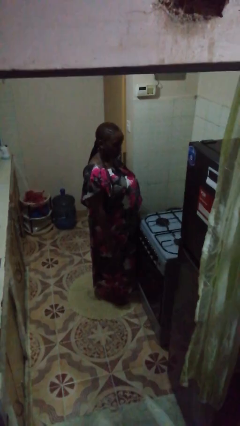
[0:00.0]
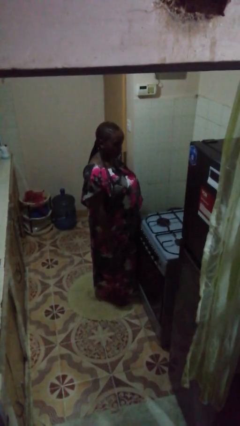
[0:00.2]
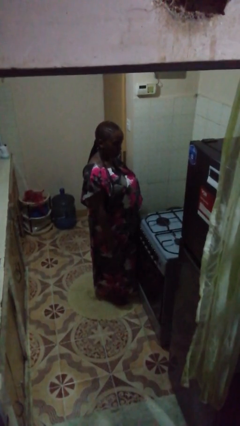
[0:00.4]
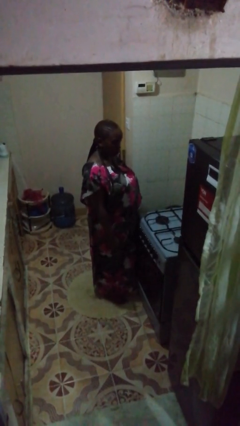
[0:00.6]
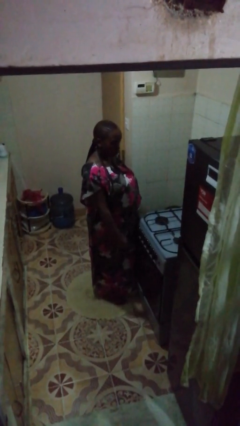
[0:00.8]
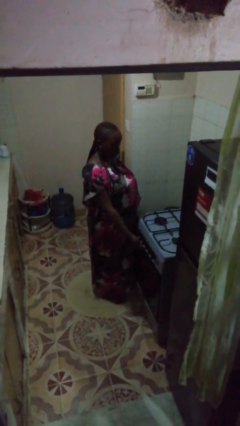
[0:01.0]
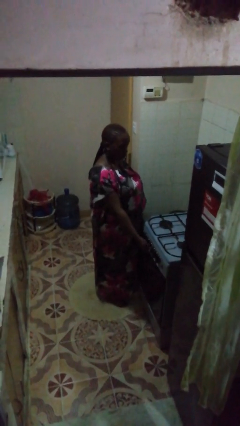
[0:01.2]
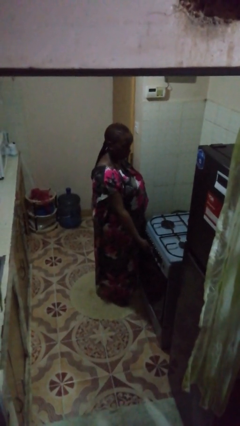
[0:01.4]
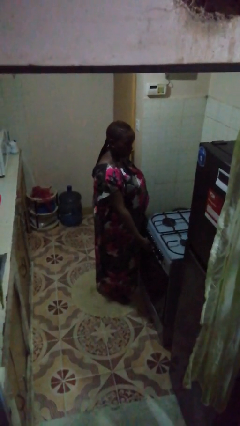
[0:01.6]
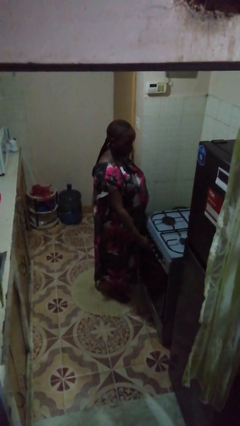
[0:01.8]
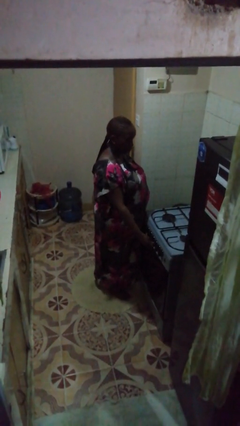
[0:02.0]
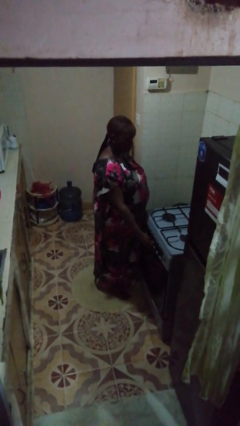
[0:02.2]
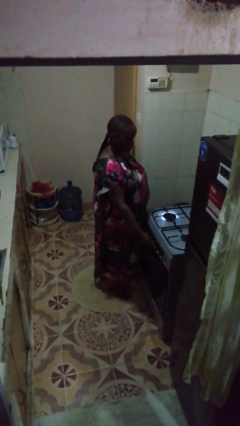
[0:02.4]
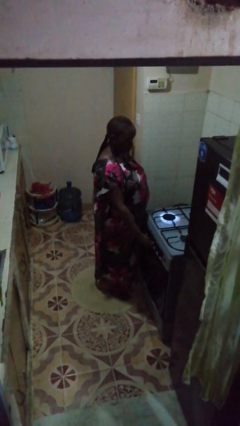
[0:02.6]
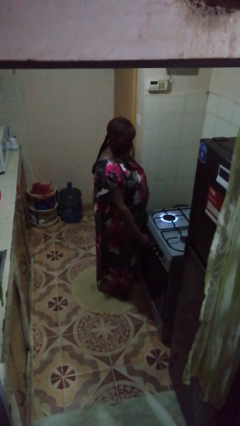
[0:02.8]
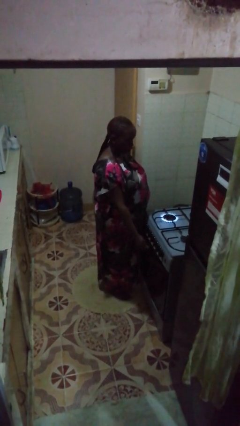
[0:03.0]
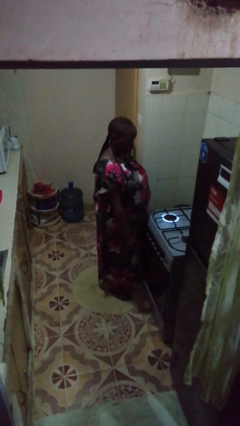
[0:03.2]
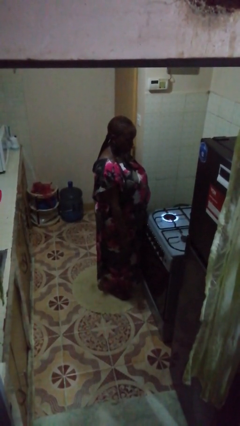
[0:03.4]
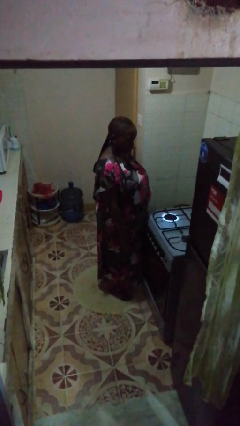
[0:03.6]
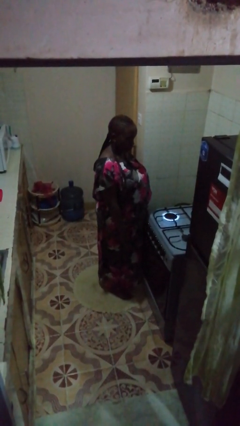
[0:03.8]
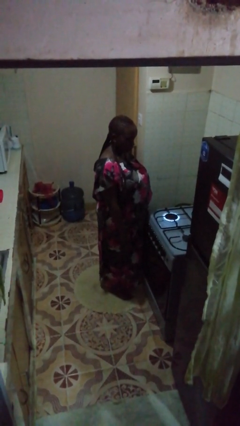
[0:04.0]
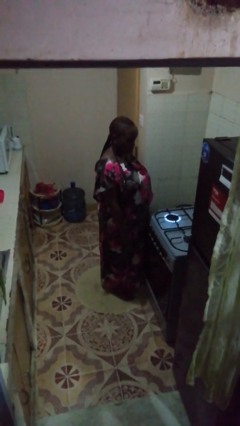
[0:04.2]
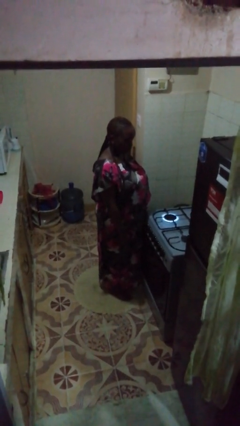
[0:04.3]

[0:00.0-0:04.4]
person turns on stovetop

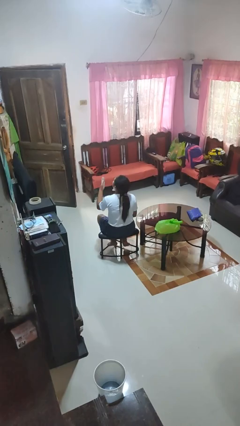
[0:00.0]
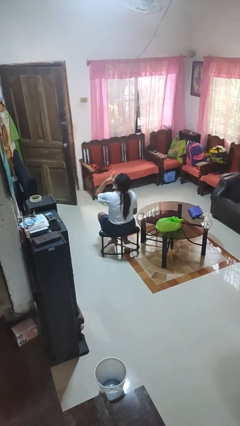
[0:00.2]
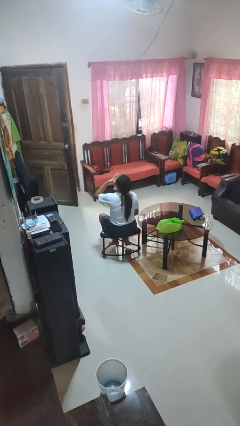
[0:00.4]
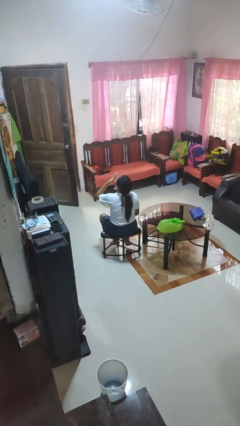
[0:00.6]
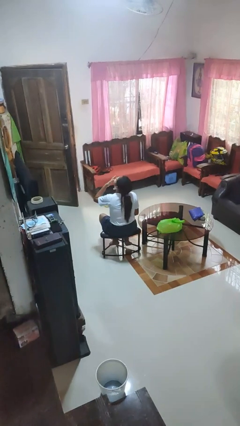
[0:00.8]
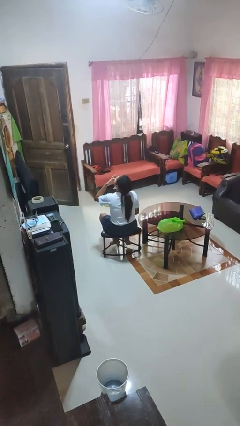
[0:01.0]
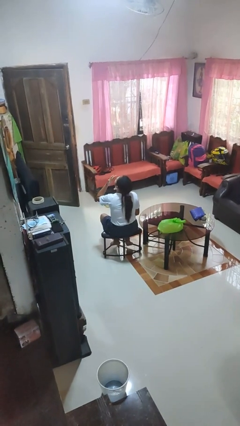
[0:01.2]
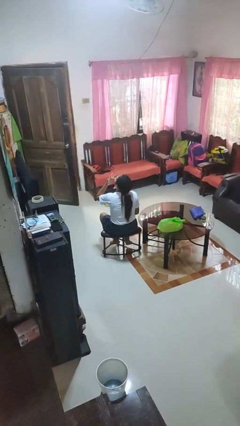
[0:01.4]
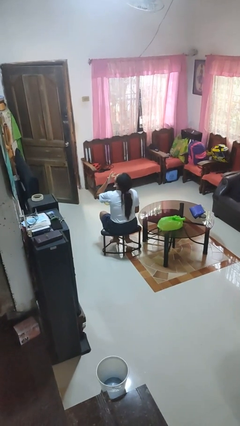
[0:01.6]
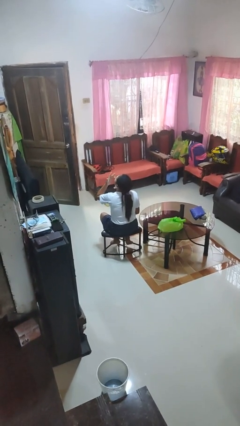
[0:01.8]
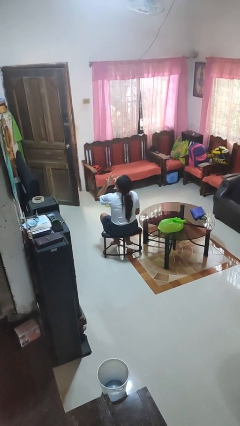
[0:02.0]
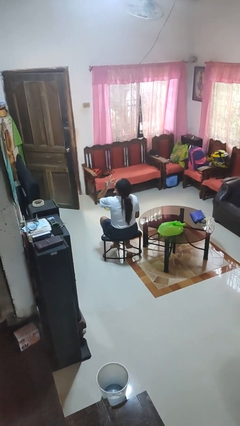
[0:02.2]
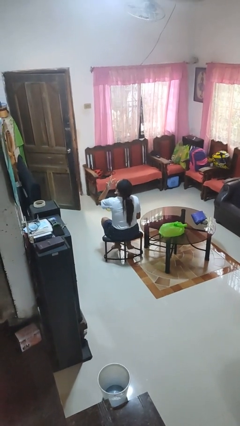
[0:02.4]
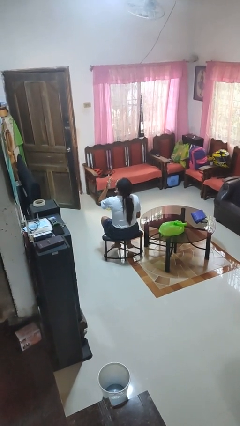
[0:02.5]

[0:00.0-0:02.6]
person licks fingers

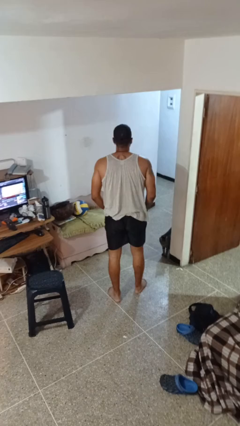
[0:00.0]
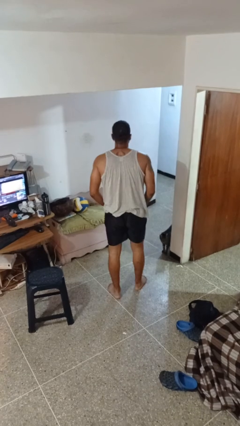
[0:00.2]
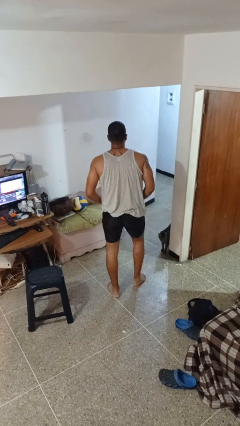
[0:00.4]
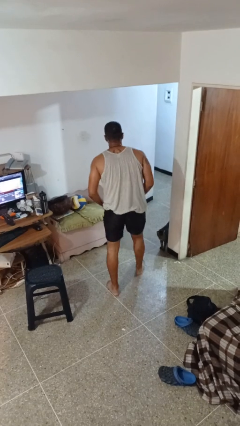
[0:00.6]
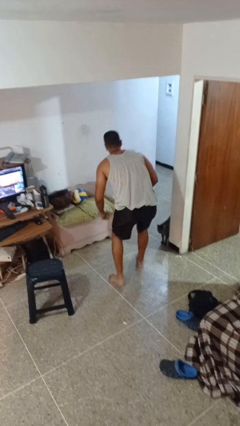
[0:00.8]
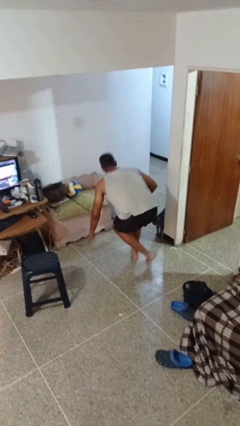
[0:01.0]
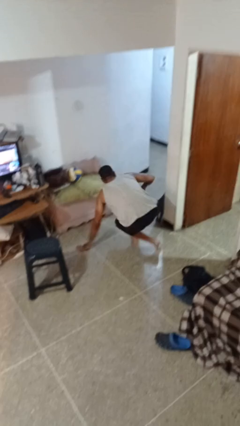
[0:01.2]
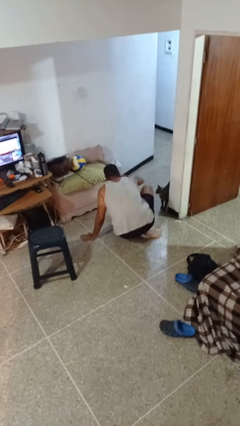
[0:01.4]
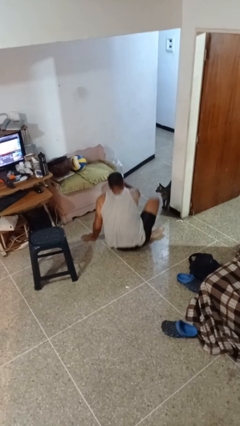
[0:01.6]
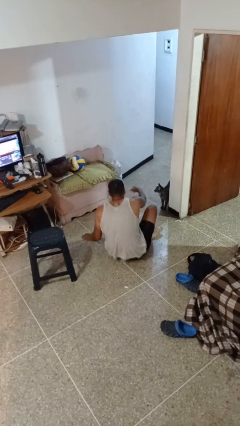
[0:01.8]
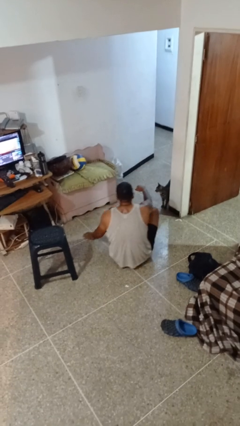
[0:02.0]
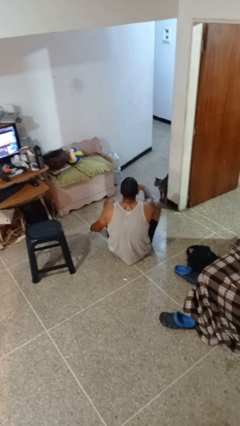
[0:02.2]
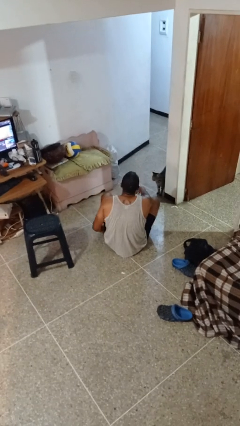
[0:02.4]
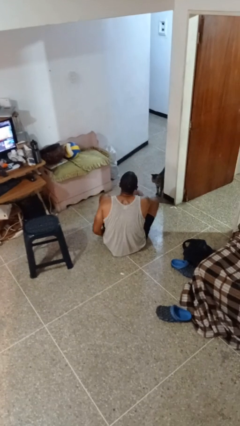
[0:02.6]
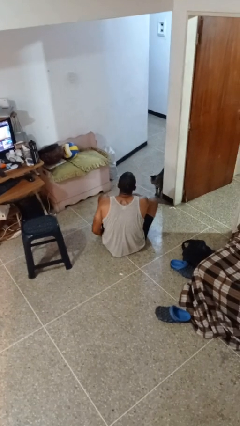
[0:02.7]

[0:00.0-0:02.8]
person sits crisscross

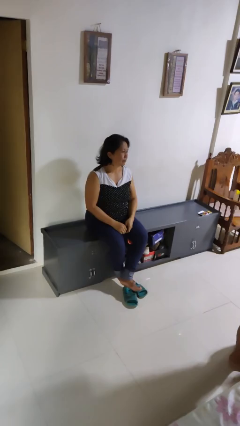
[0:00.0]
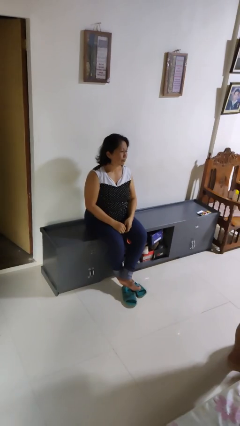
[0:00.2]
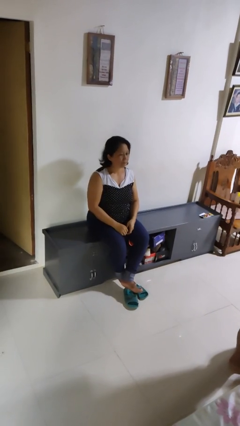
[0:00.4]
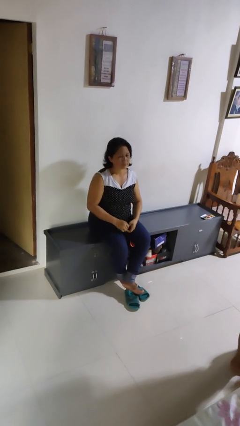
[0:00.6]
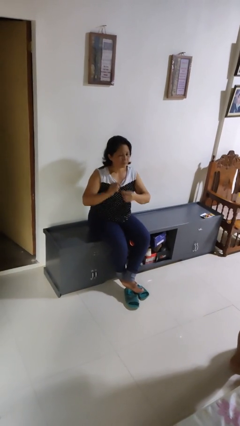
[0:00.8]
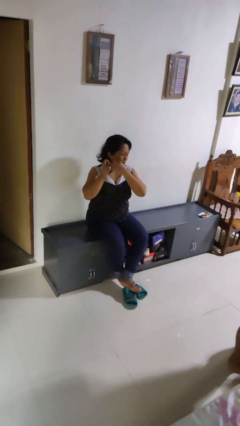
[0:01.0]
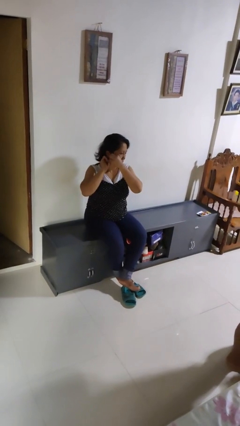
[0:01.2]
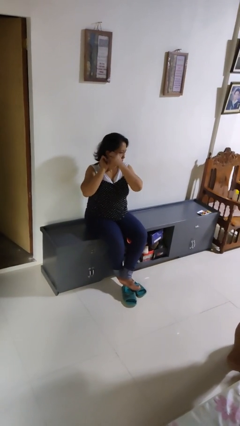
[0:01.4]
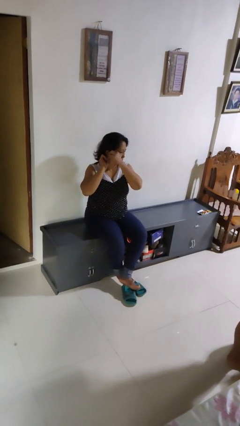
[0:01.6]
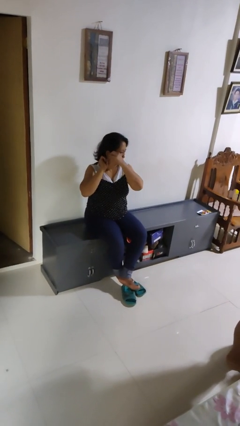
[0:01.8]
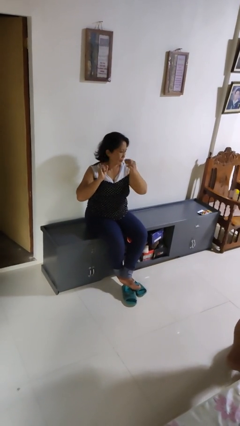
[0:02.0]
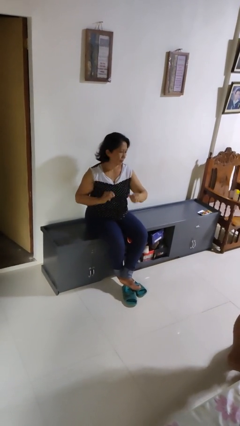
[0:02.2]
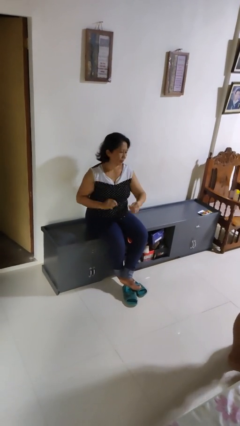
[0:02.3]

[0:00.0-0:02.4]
person takes off earrings

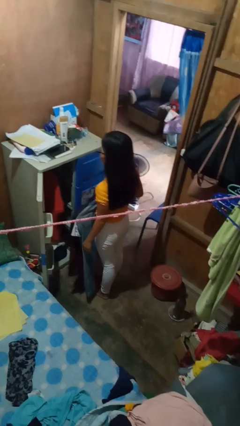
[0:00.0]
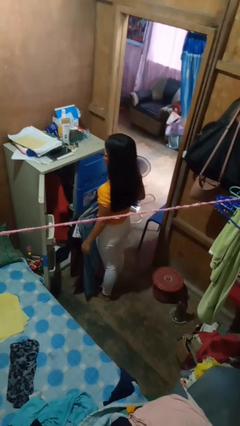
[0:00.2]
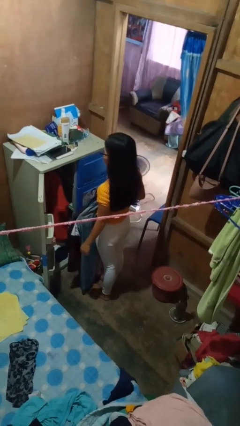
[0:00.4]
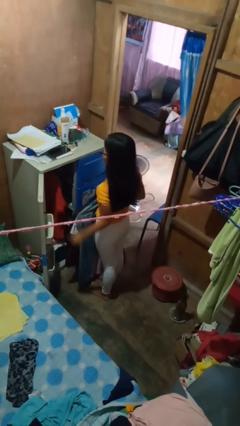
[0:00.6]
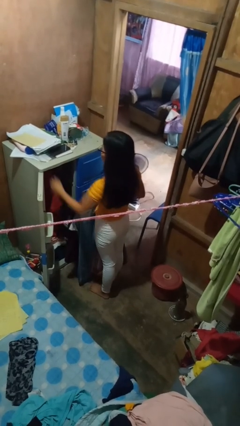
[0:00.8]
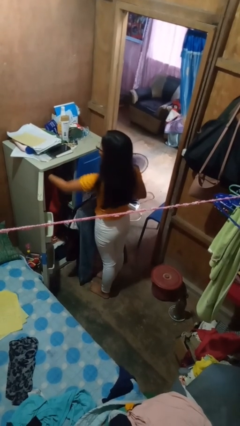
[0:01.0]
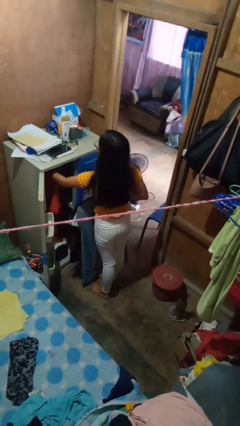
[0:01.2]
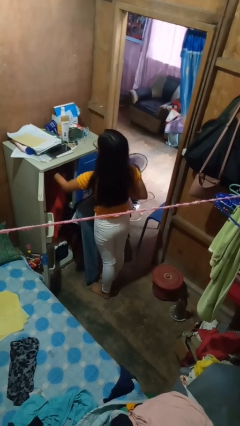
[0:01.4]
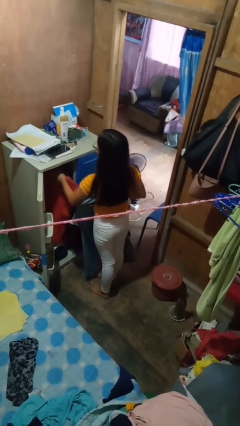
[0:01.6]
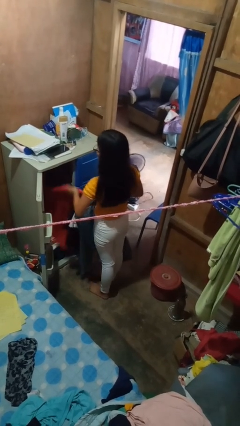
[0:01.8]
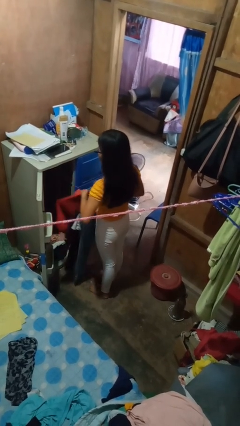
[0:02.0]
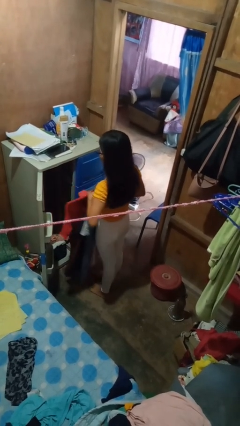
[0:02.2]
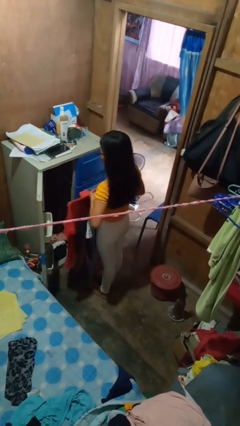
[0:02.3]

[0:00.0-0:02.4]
person takes clothes from closet

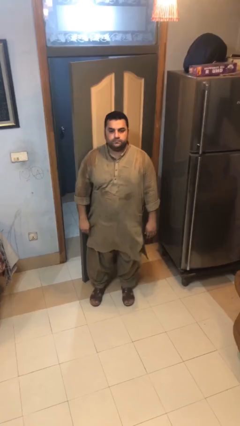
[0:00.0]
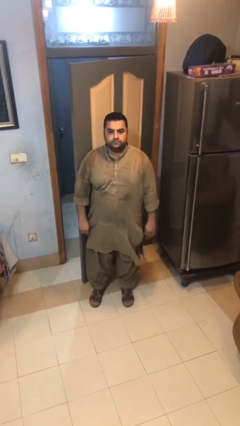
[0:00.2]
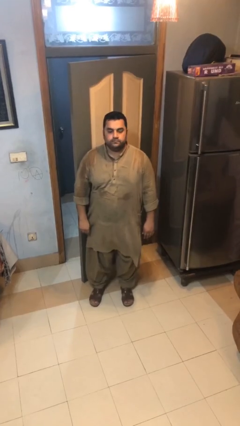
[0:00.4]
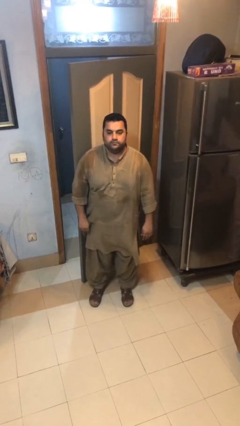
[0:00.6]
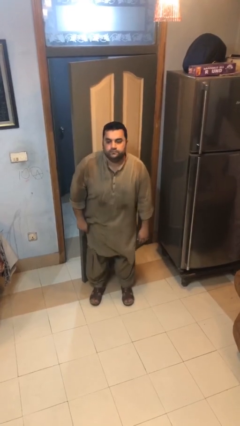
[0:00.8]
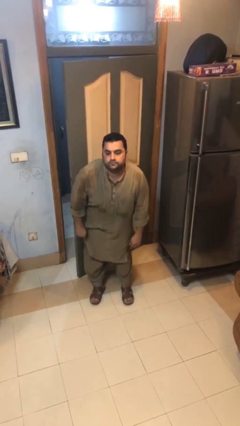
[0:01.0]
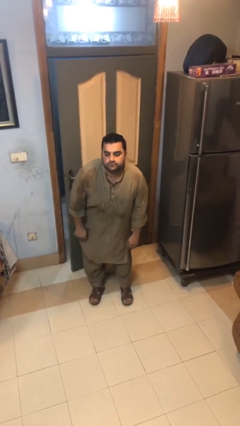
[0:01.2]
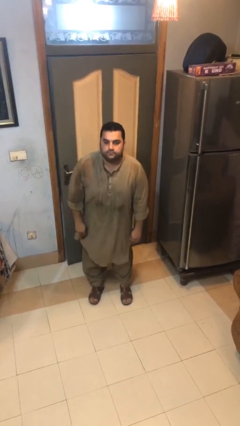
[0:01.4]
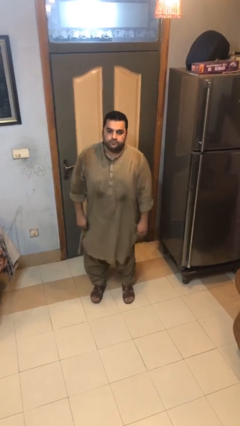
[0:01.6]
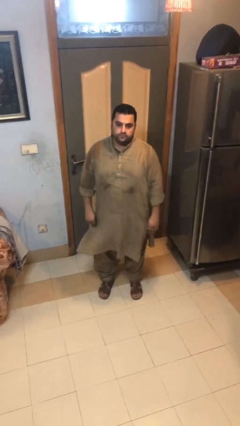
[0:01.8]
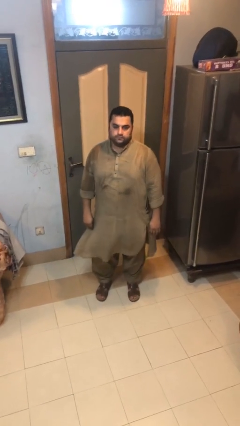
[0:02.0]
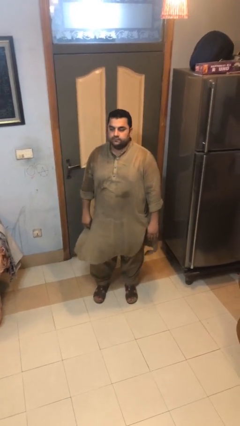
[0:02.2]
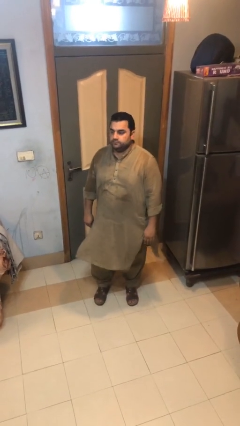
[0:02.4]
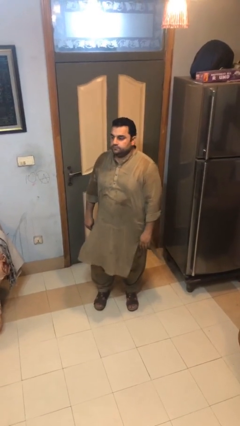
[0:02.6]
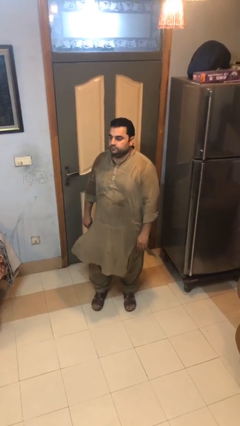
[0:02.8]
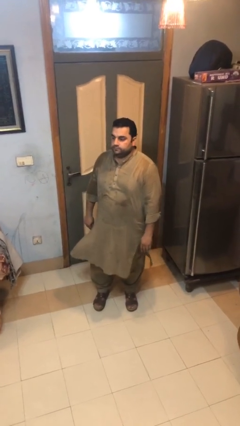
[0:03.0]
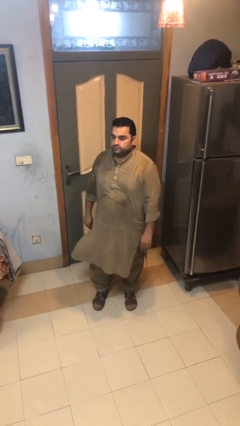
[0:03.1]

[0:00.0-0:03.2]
person closes door with hip
